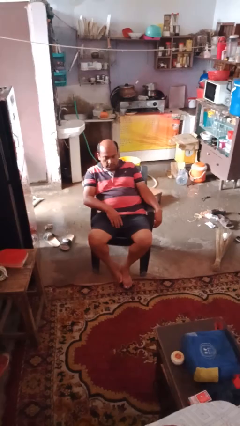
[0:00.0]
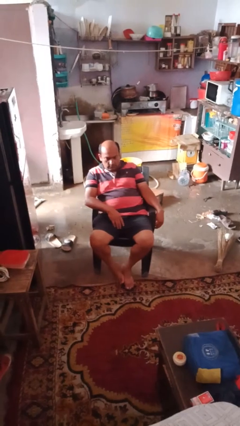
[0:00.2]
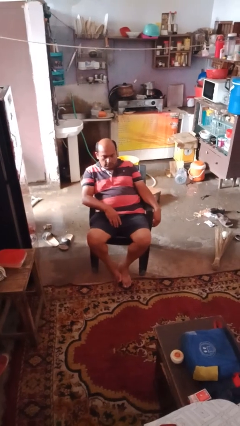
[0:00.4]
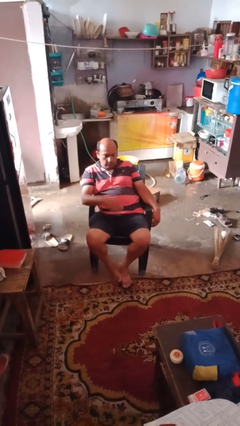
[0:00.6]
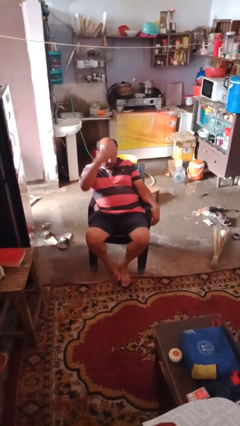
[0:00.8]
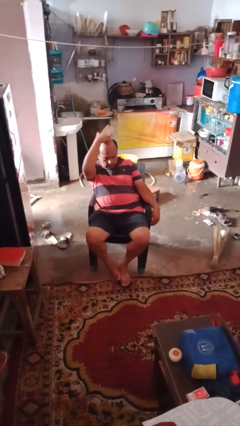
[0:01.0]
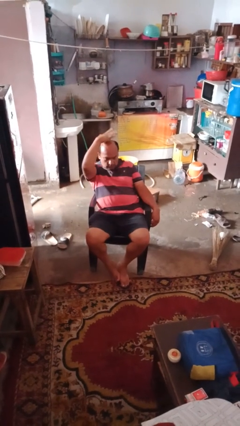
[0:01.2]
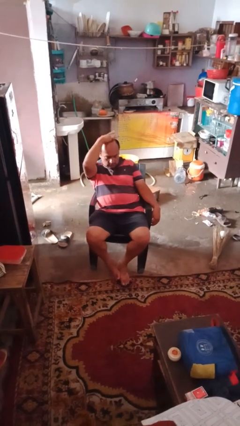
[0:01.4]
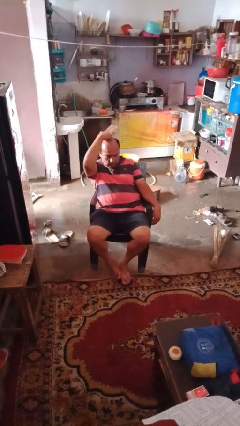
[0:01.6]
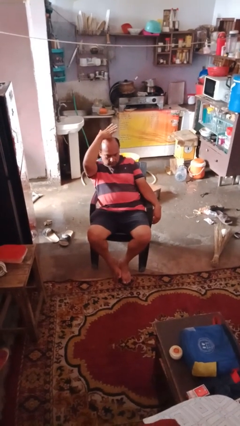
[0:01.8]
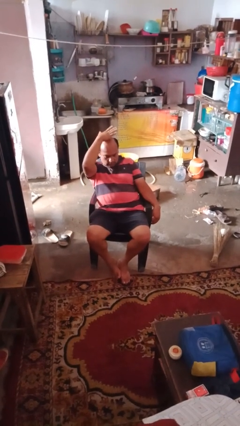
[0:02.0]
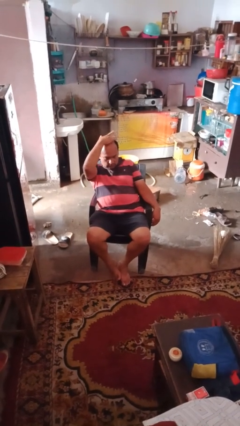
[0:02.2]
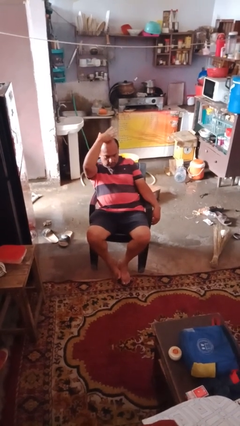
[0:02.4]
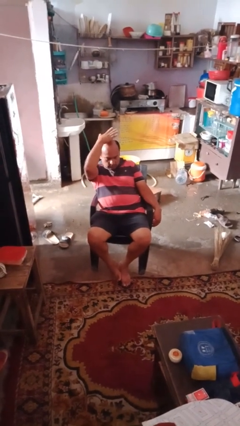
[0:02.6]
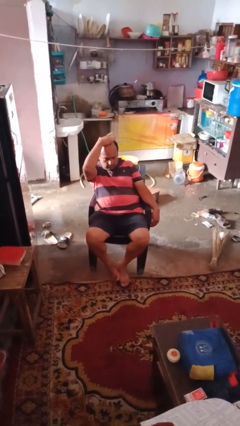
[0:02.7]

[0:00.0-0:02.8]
person pats head

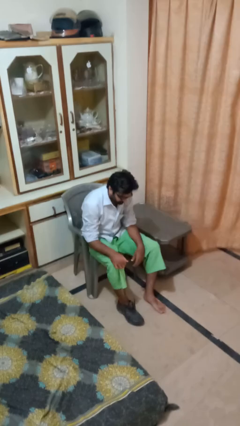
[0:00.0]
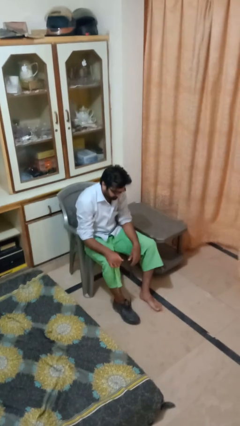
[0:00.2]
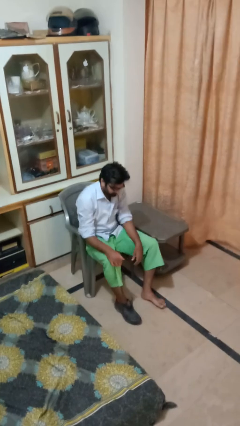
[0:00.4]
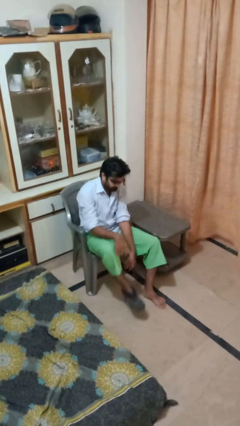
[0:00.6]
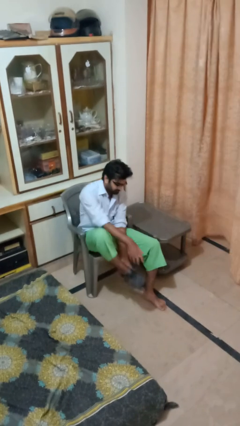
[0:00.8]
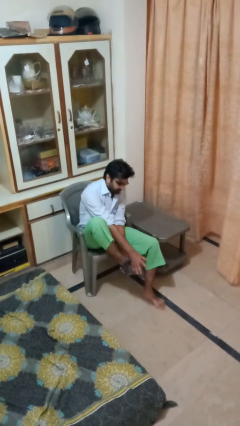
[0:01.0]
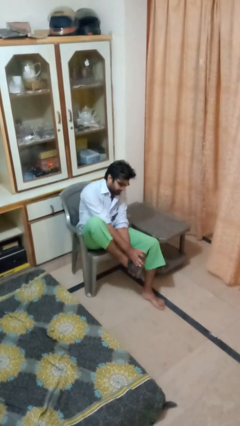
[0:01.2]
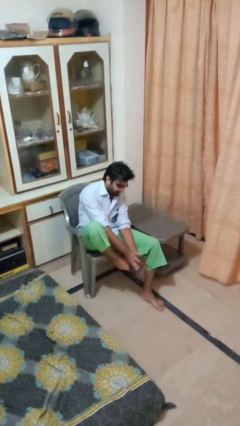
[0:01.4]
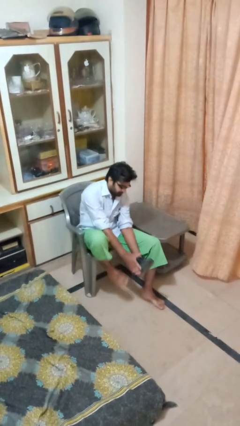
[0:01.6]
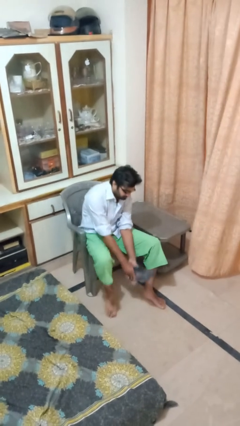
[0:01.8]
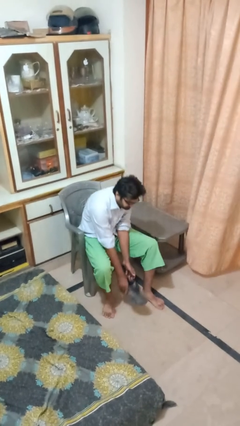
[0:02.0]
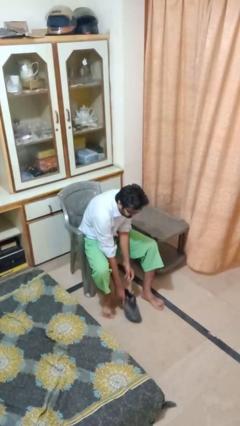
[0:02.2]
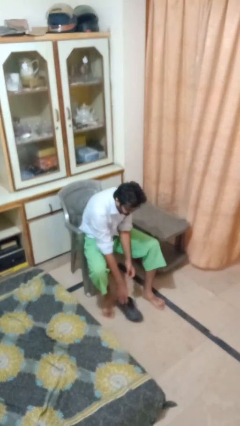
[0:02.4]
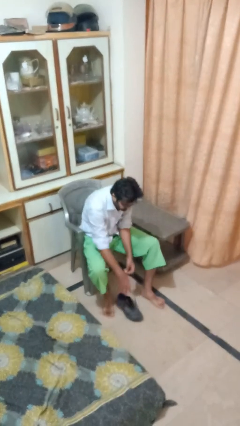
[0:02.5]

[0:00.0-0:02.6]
person takes off boots

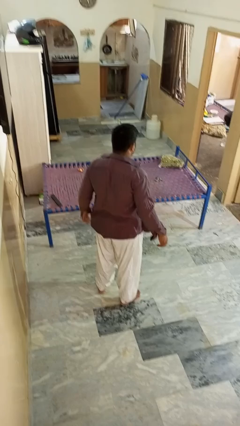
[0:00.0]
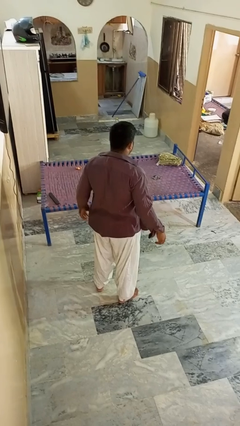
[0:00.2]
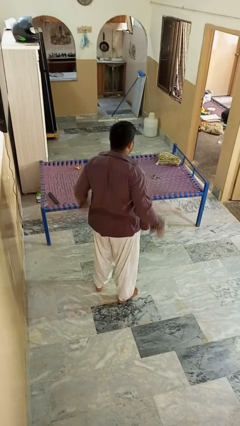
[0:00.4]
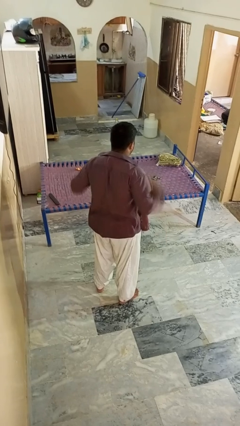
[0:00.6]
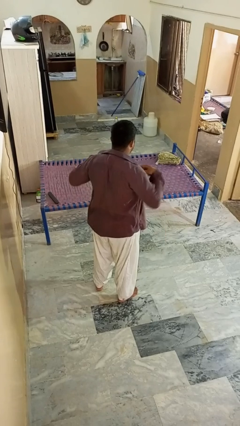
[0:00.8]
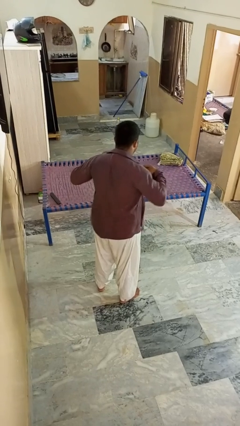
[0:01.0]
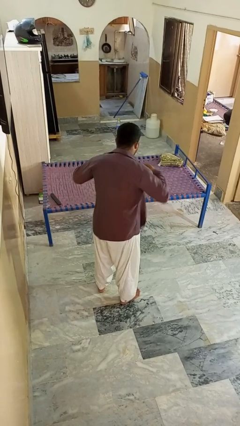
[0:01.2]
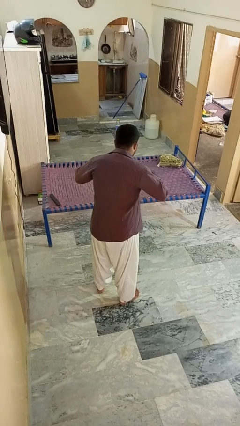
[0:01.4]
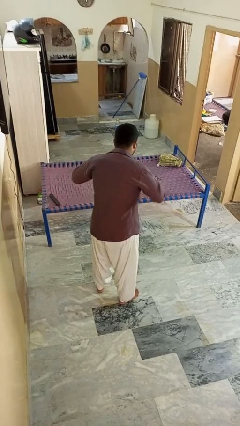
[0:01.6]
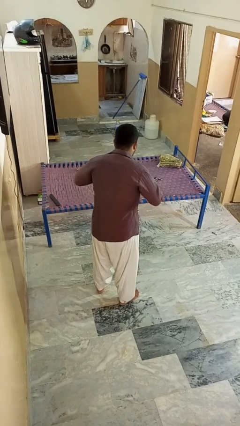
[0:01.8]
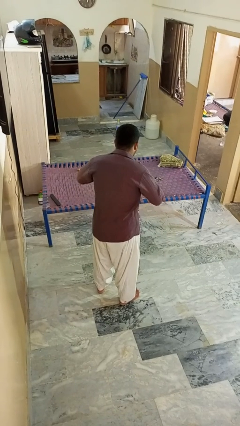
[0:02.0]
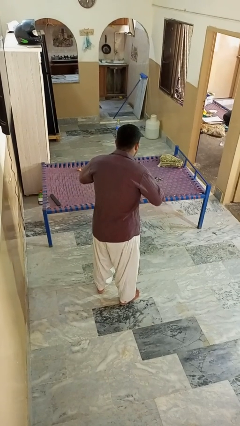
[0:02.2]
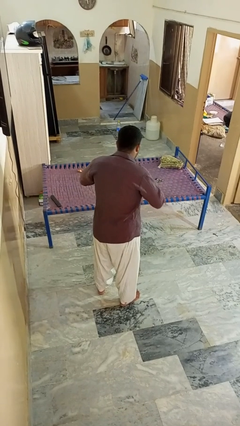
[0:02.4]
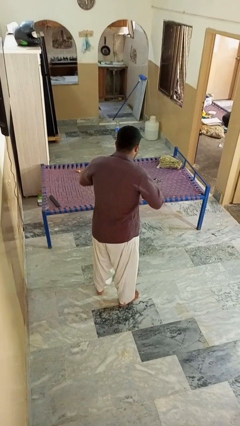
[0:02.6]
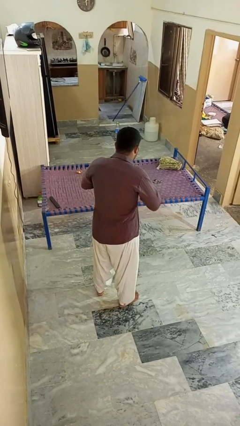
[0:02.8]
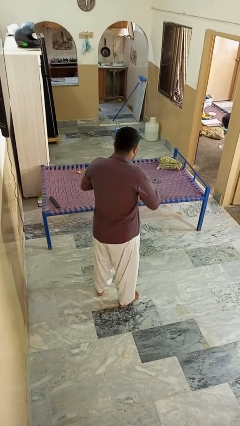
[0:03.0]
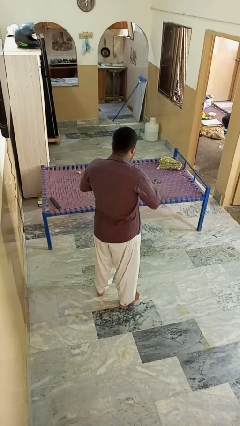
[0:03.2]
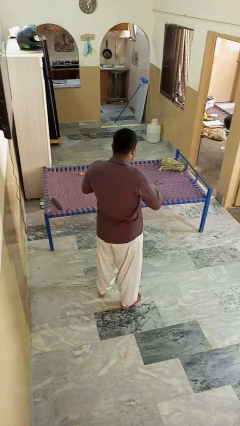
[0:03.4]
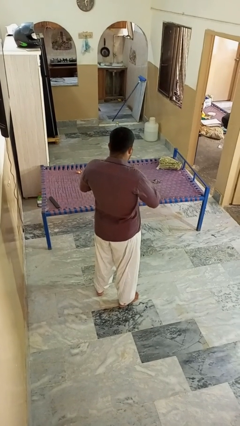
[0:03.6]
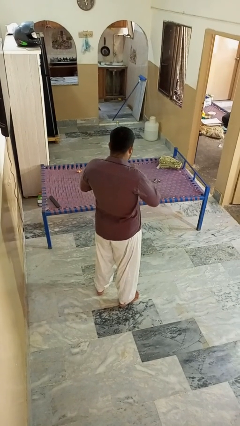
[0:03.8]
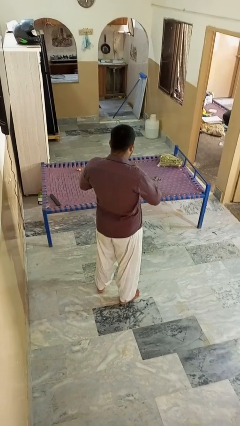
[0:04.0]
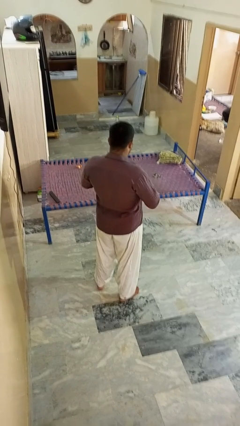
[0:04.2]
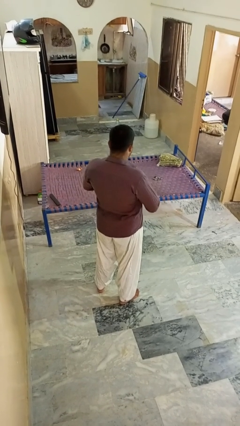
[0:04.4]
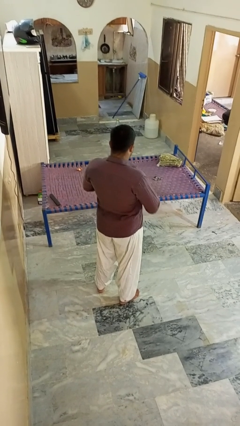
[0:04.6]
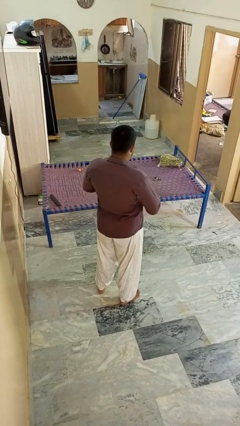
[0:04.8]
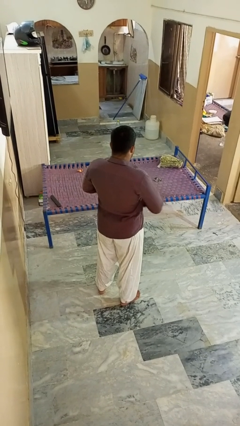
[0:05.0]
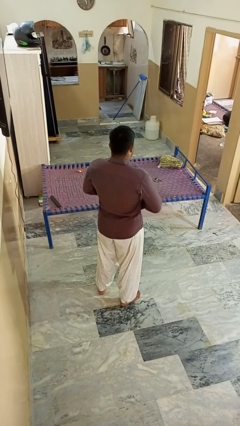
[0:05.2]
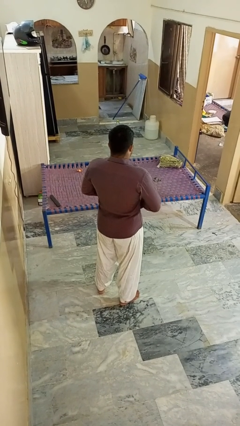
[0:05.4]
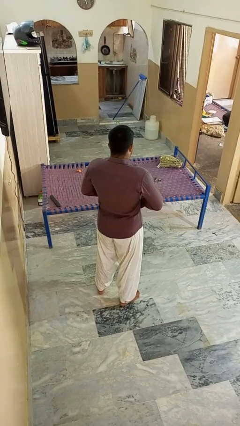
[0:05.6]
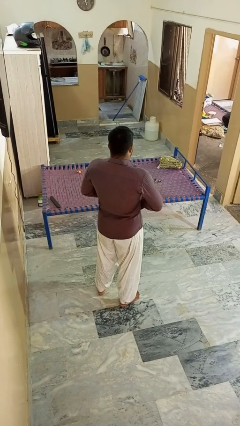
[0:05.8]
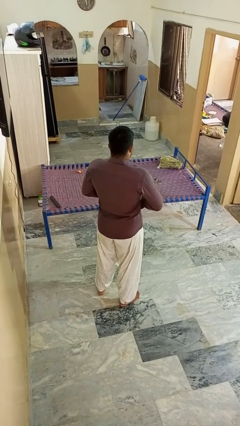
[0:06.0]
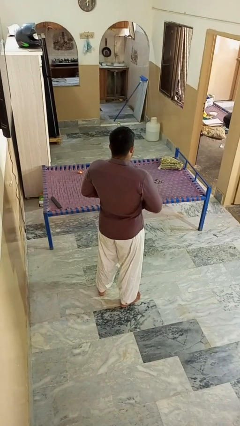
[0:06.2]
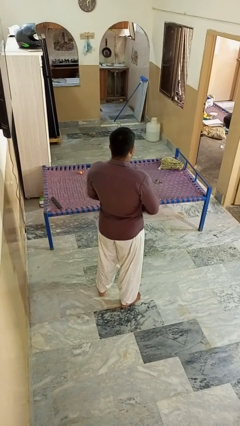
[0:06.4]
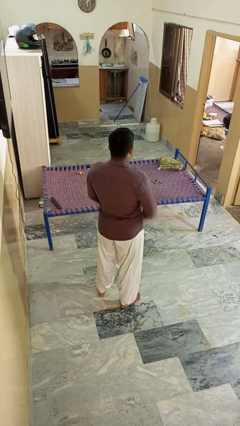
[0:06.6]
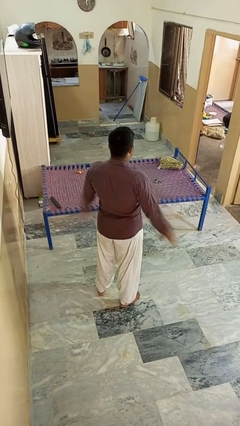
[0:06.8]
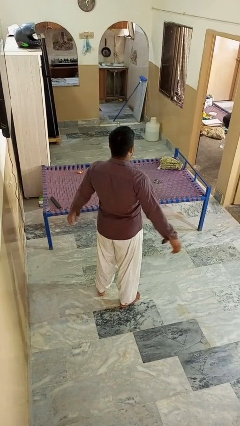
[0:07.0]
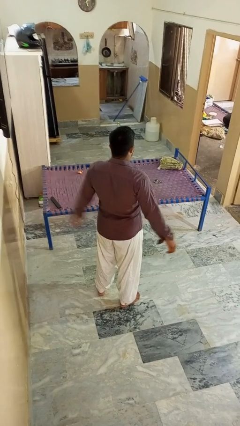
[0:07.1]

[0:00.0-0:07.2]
person buttons shirt

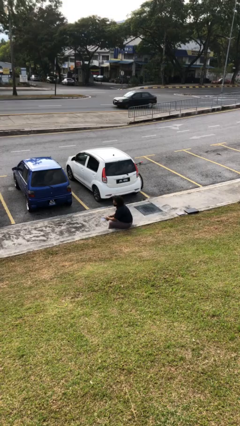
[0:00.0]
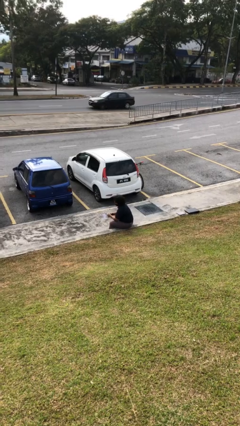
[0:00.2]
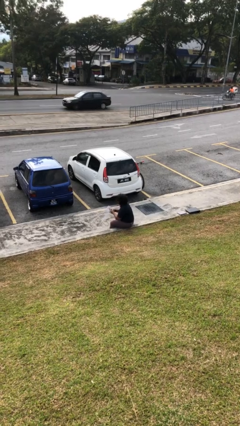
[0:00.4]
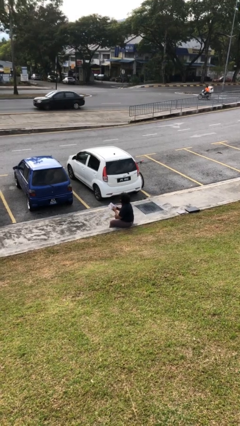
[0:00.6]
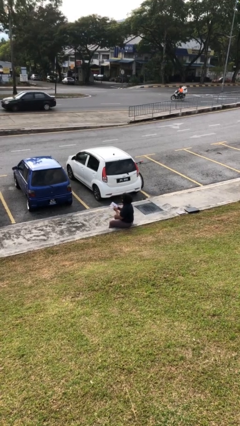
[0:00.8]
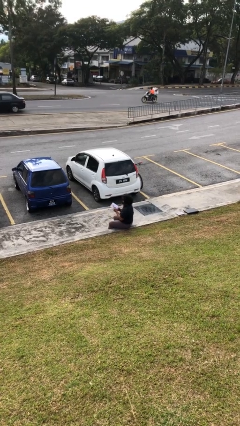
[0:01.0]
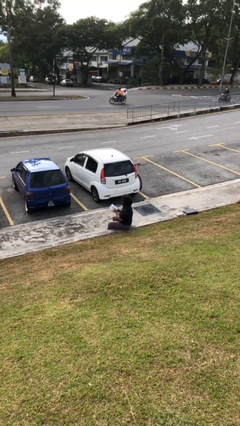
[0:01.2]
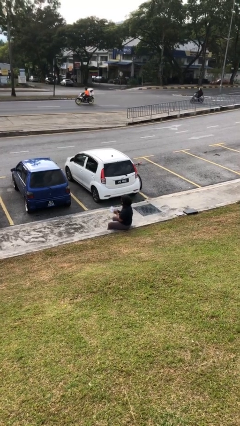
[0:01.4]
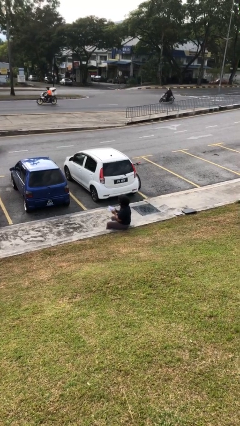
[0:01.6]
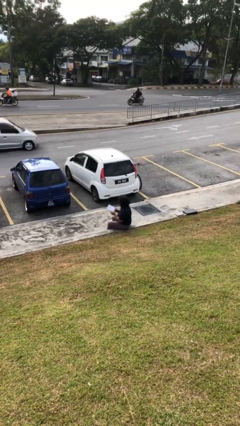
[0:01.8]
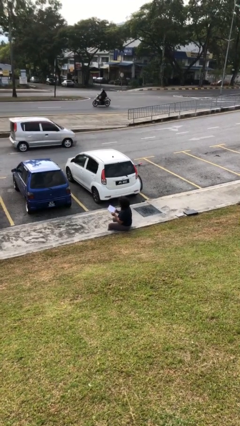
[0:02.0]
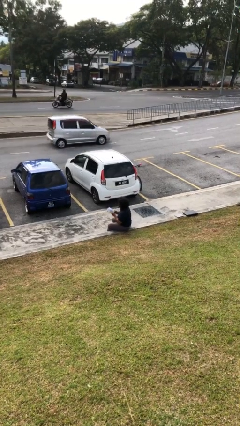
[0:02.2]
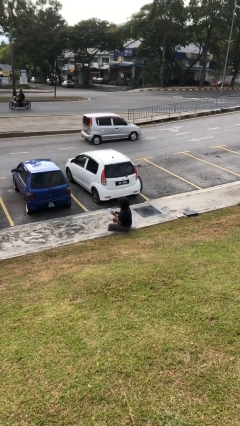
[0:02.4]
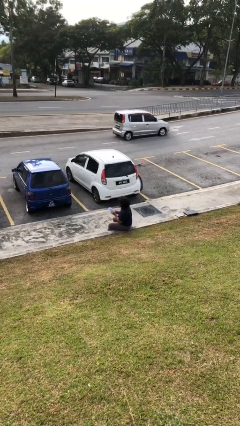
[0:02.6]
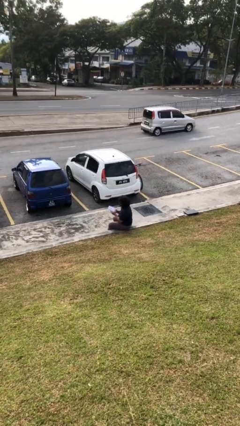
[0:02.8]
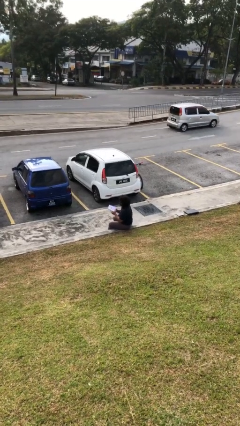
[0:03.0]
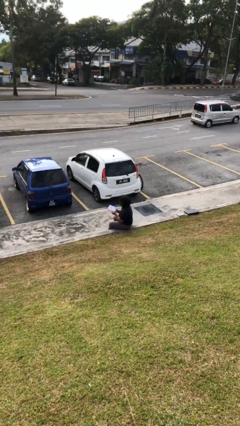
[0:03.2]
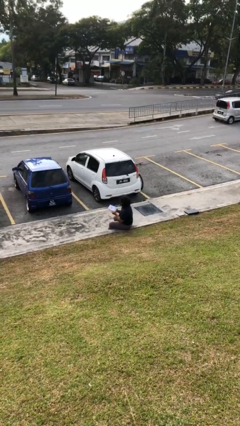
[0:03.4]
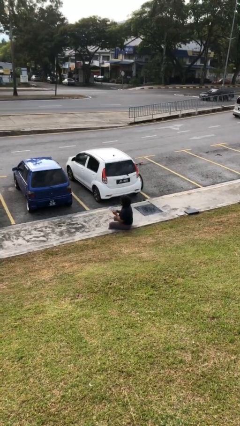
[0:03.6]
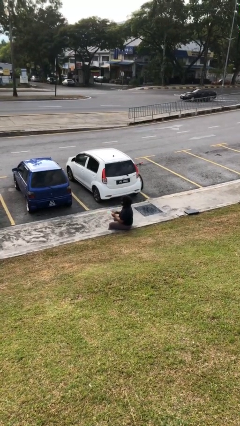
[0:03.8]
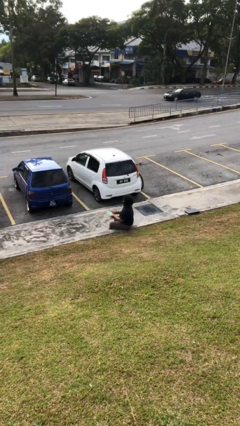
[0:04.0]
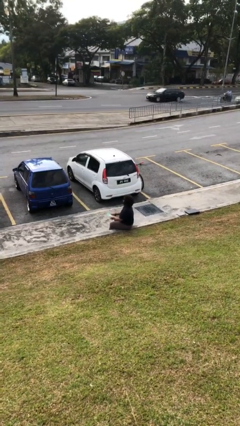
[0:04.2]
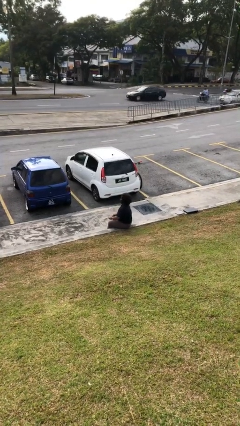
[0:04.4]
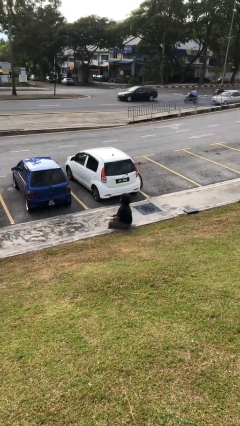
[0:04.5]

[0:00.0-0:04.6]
person reads document
